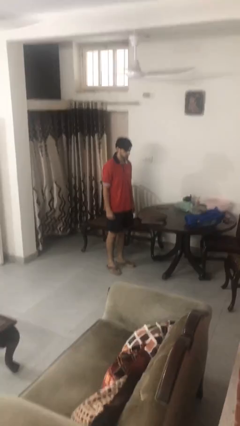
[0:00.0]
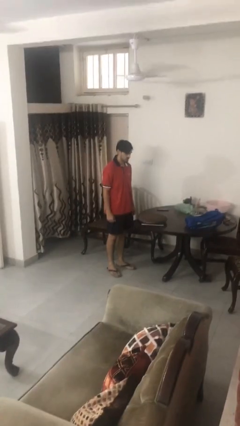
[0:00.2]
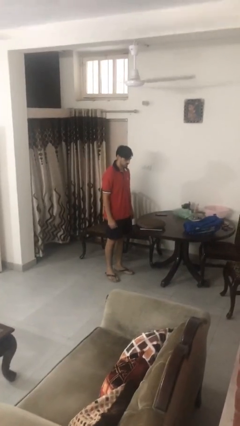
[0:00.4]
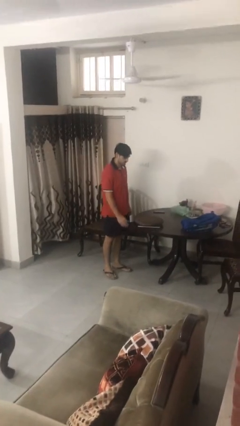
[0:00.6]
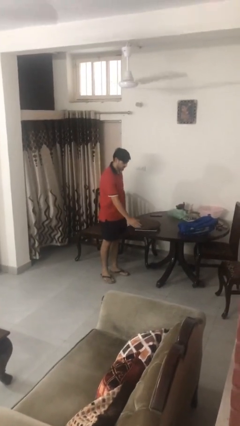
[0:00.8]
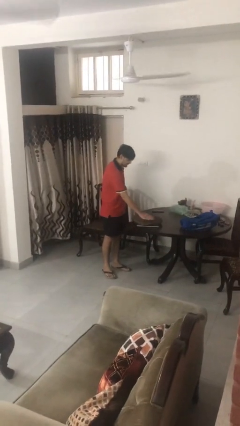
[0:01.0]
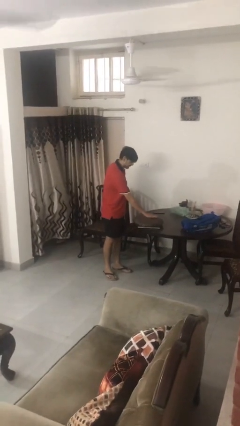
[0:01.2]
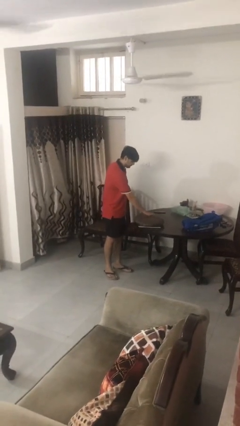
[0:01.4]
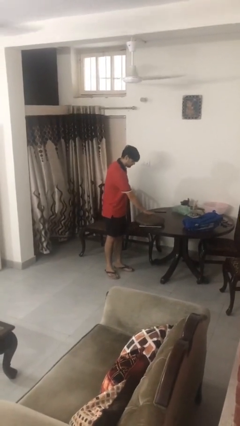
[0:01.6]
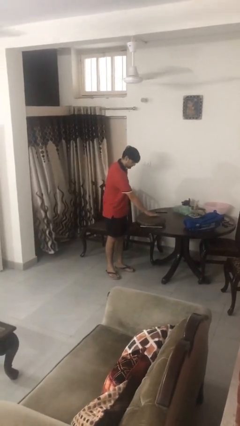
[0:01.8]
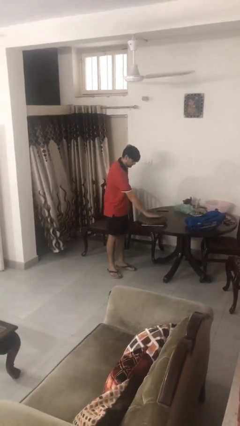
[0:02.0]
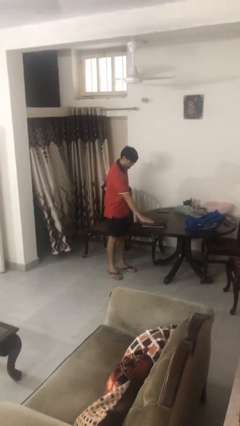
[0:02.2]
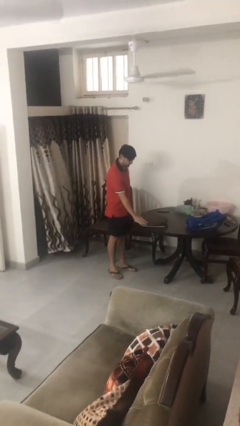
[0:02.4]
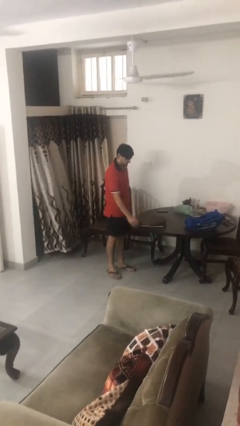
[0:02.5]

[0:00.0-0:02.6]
person waves hand over object

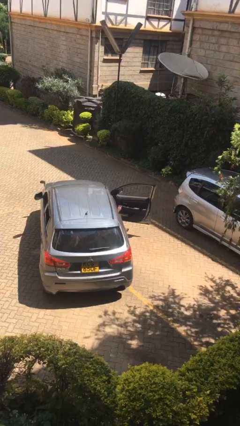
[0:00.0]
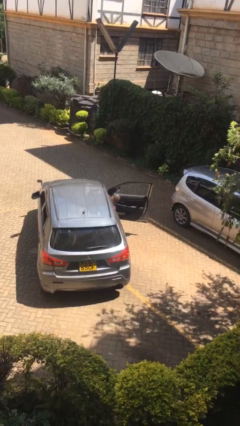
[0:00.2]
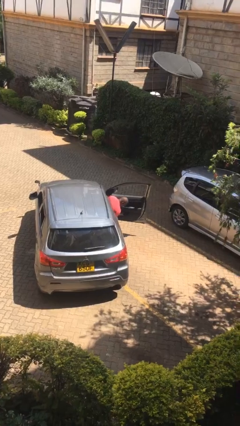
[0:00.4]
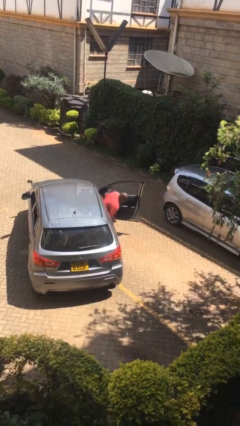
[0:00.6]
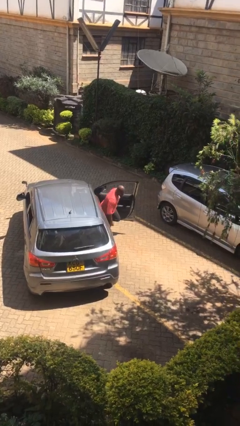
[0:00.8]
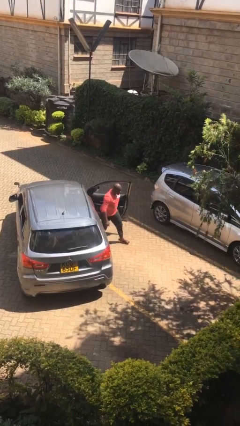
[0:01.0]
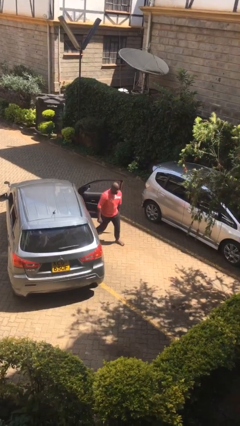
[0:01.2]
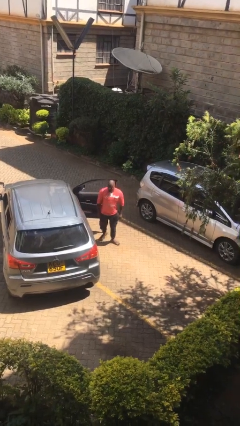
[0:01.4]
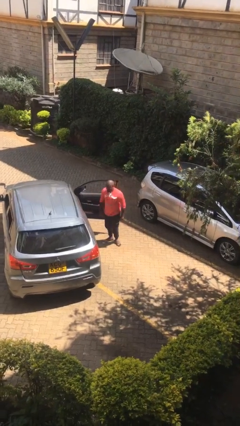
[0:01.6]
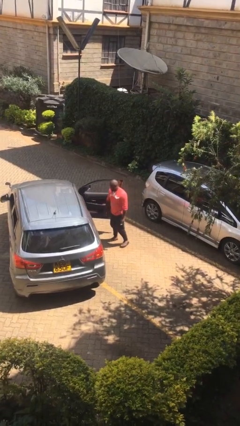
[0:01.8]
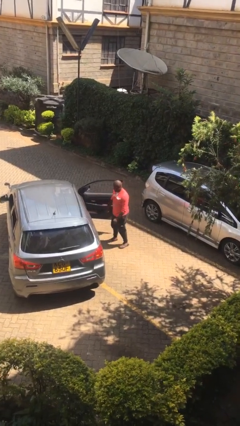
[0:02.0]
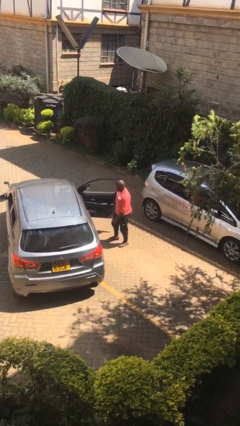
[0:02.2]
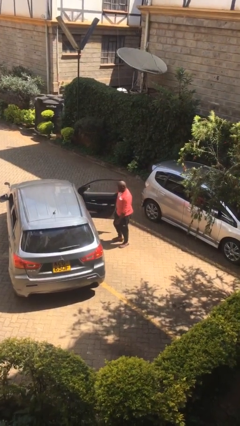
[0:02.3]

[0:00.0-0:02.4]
person exits car

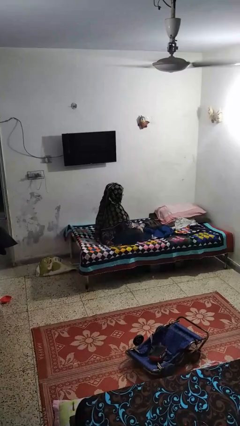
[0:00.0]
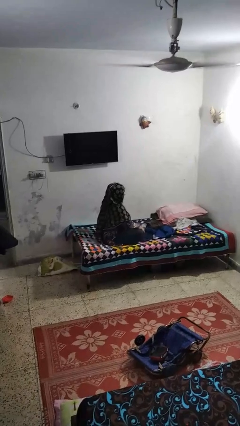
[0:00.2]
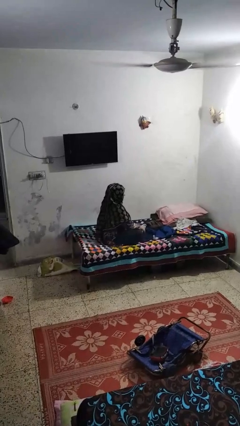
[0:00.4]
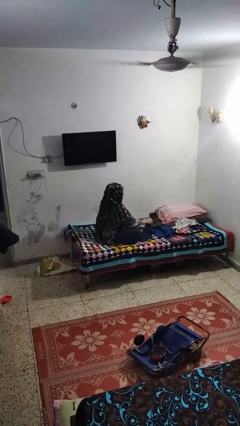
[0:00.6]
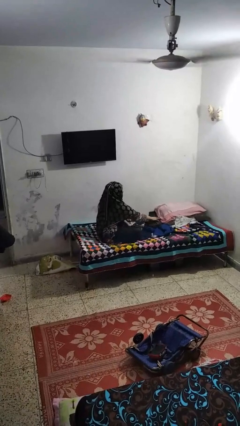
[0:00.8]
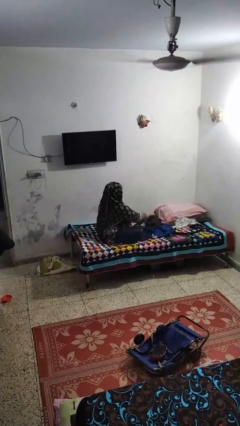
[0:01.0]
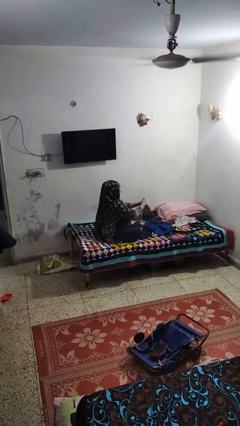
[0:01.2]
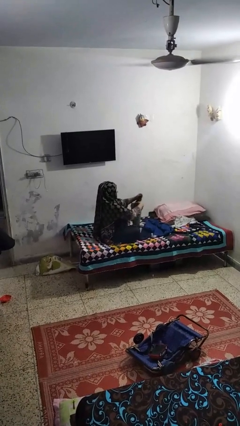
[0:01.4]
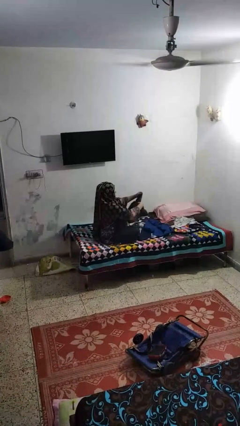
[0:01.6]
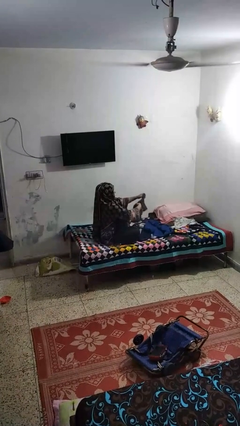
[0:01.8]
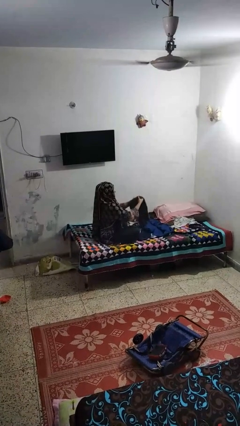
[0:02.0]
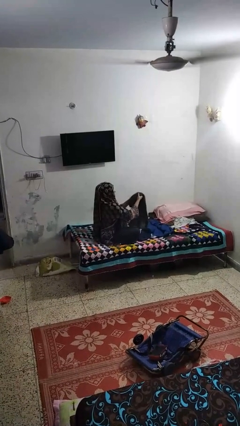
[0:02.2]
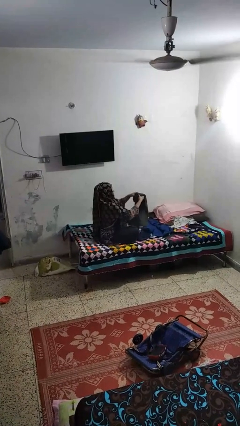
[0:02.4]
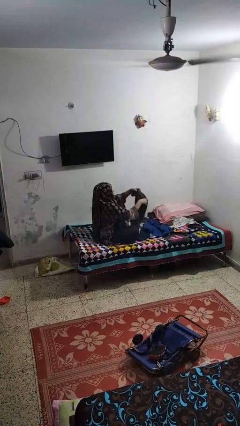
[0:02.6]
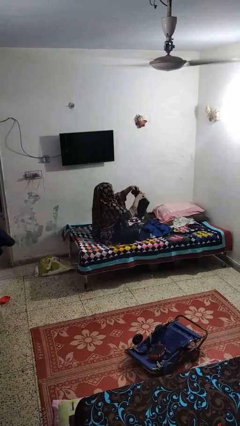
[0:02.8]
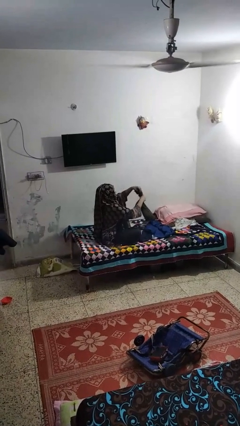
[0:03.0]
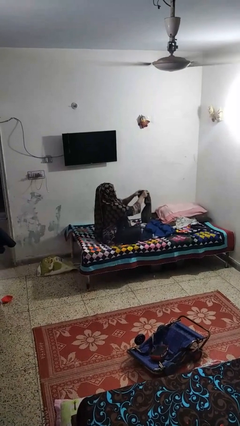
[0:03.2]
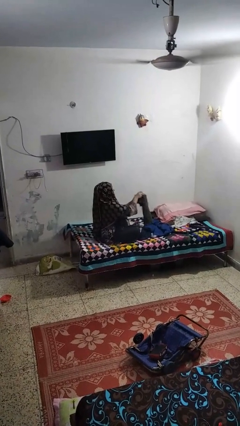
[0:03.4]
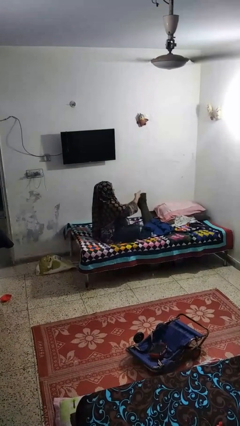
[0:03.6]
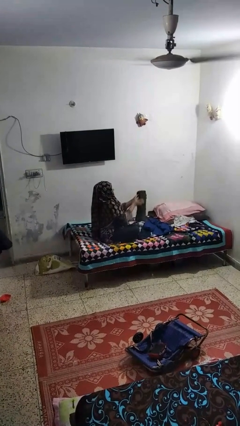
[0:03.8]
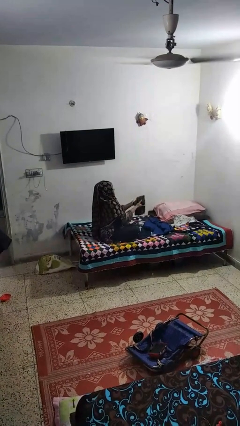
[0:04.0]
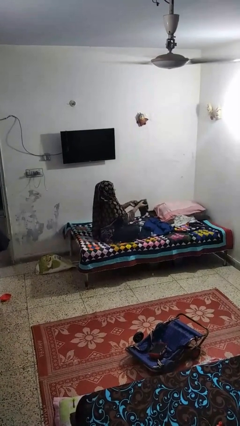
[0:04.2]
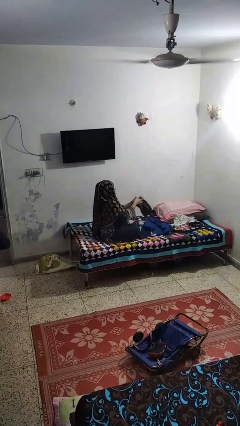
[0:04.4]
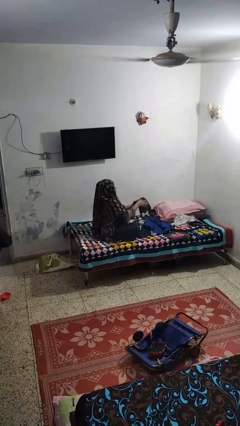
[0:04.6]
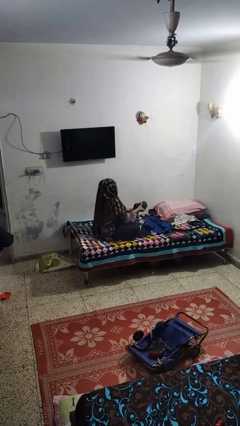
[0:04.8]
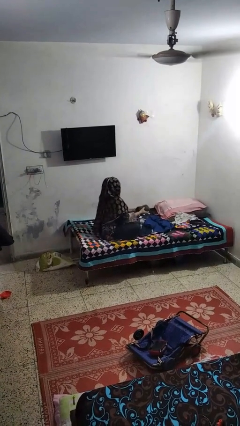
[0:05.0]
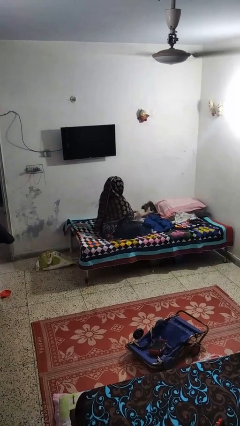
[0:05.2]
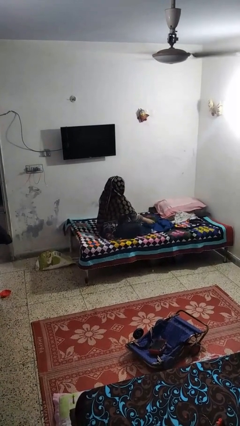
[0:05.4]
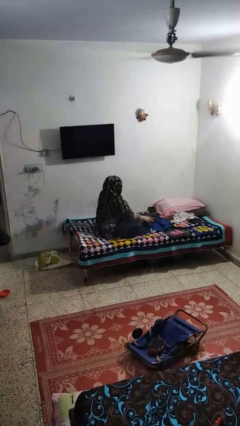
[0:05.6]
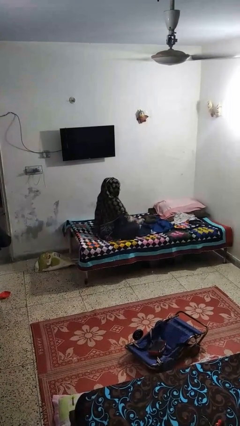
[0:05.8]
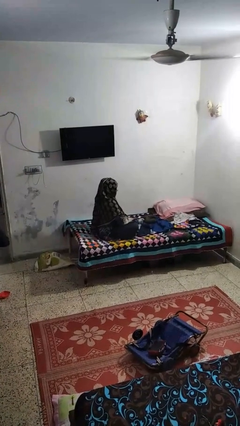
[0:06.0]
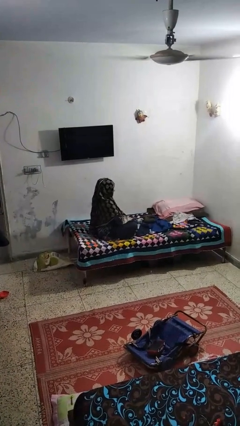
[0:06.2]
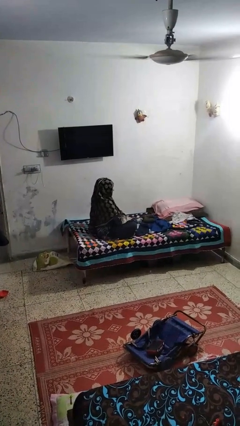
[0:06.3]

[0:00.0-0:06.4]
person folds shirt

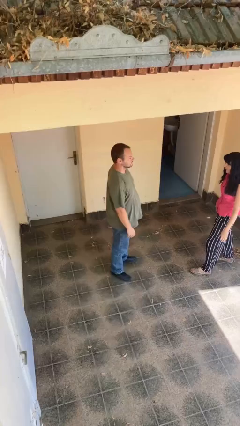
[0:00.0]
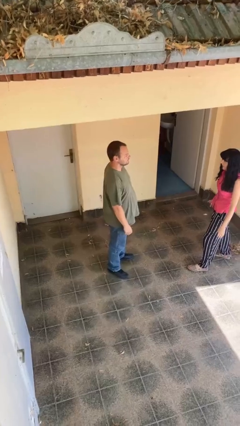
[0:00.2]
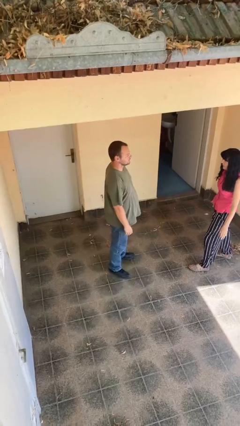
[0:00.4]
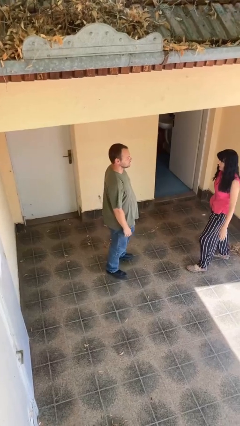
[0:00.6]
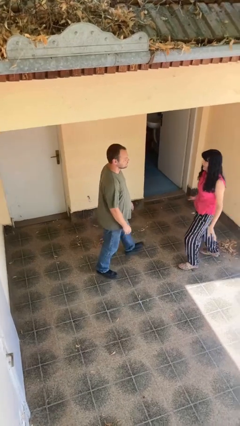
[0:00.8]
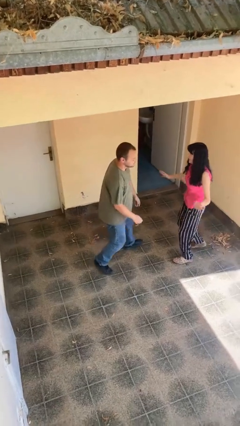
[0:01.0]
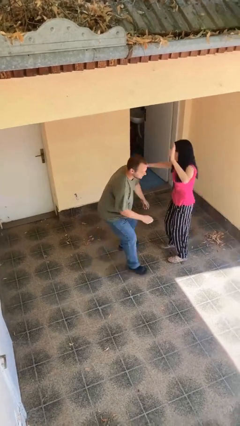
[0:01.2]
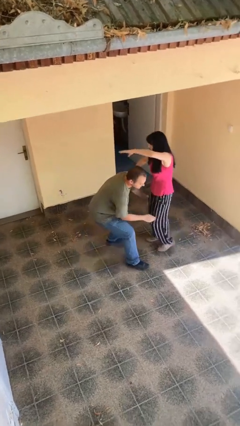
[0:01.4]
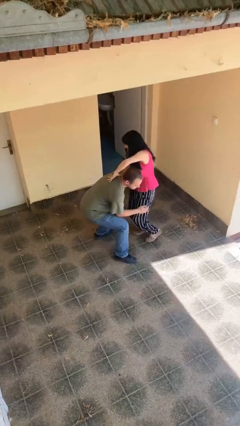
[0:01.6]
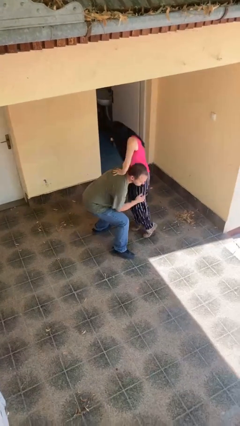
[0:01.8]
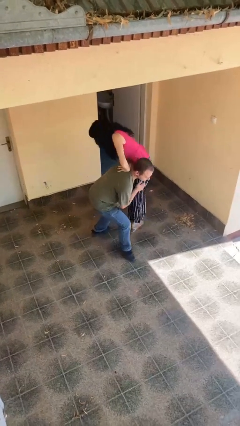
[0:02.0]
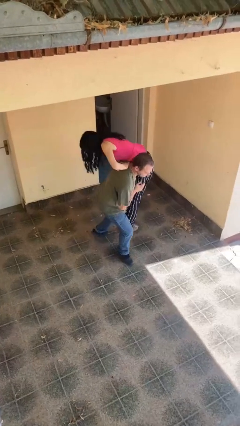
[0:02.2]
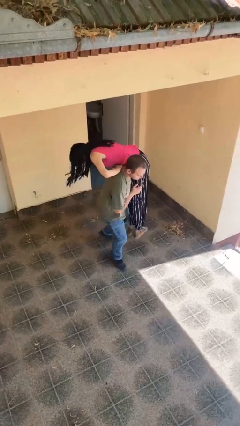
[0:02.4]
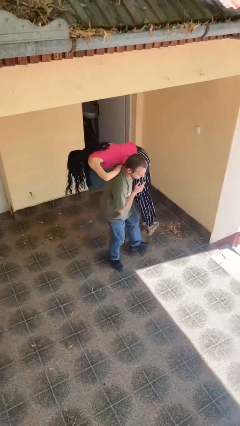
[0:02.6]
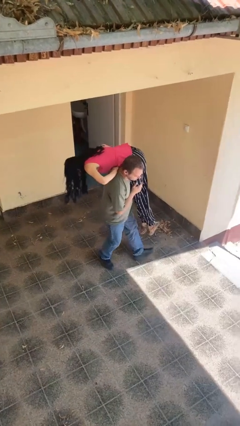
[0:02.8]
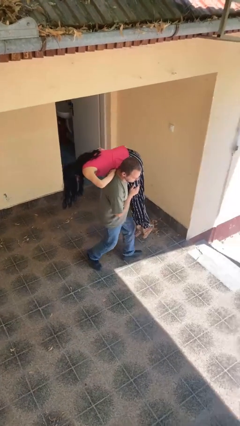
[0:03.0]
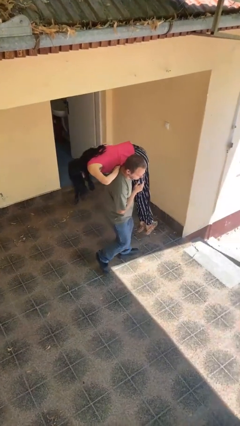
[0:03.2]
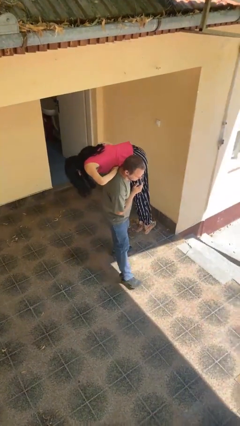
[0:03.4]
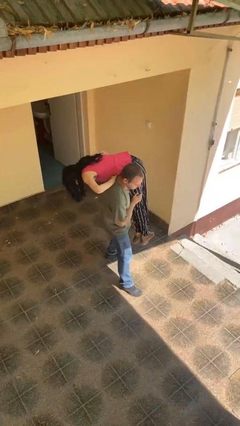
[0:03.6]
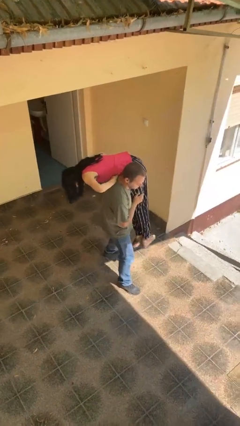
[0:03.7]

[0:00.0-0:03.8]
person carries person over shoulder

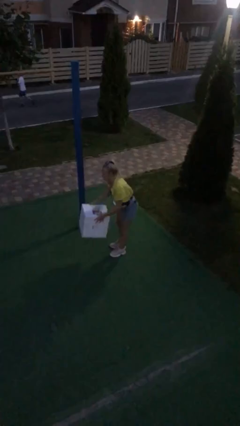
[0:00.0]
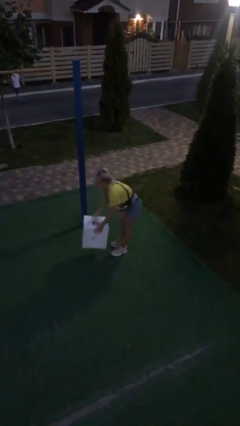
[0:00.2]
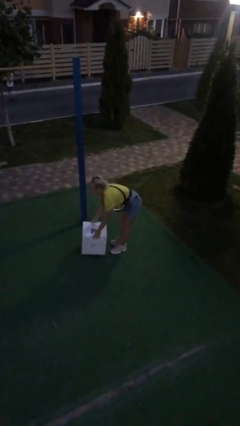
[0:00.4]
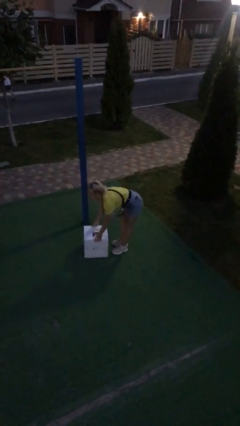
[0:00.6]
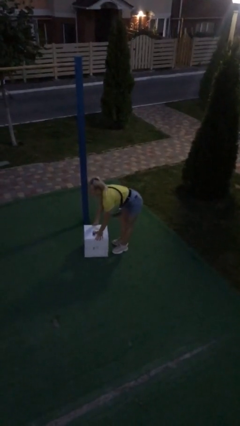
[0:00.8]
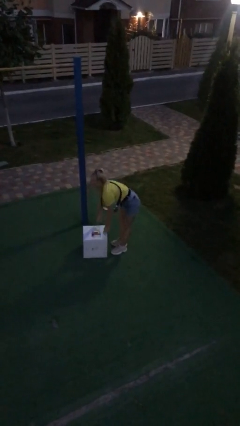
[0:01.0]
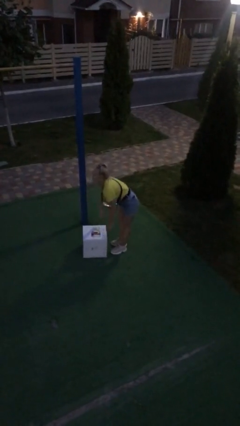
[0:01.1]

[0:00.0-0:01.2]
person puts down object on floor

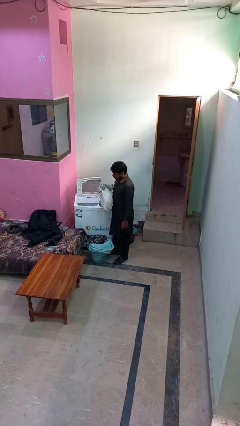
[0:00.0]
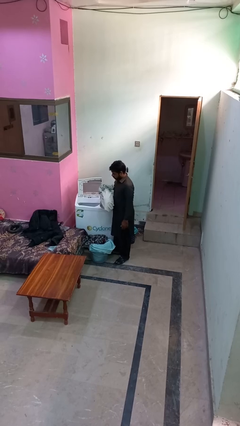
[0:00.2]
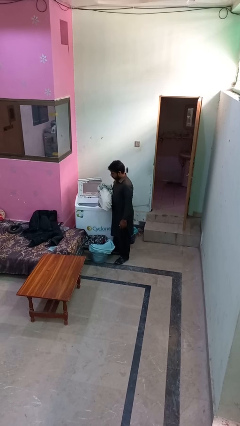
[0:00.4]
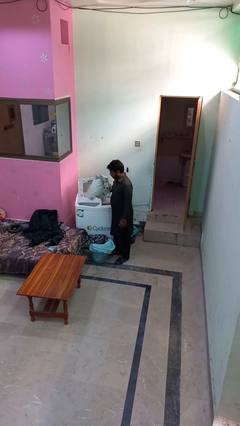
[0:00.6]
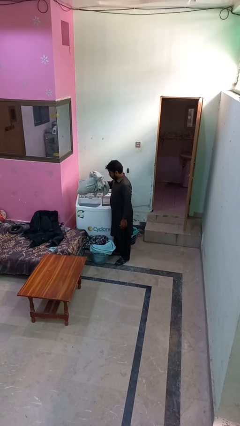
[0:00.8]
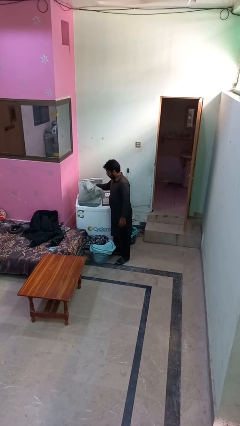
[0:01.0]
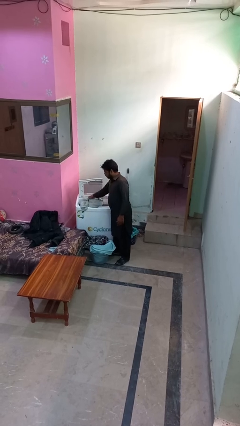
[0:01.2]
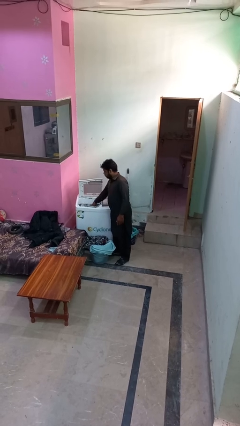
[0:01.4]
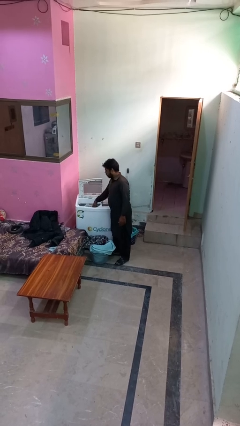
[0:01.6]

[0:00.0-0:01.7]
person loads clotheswasher
